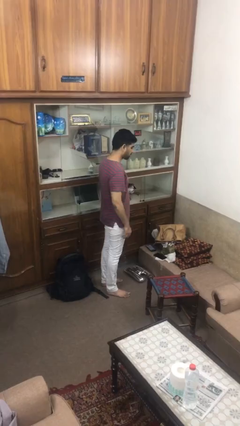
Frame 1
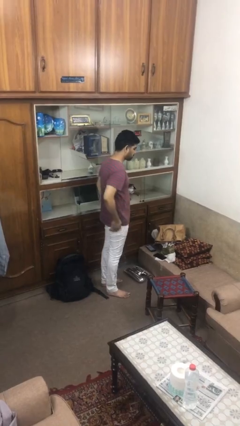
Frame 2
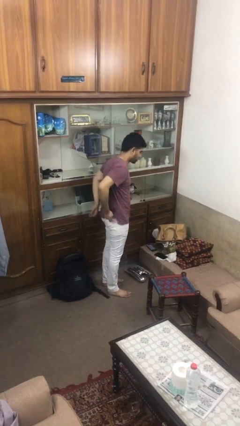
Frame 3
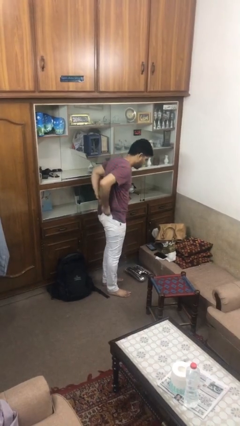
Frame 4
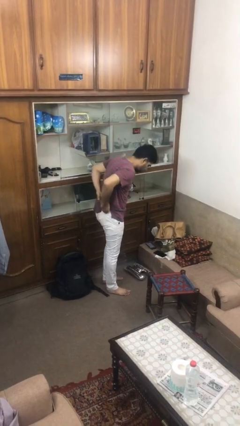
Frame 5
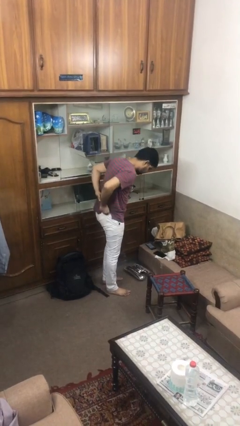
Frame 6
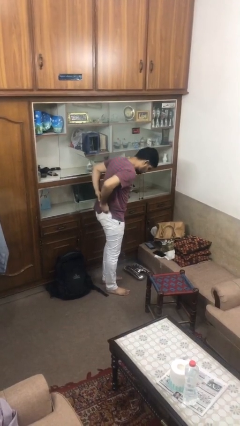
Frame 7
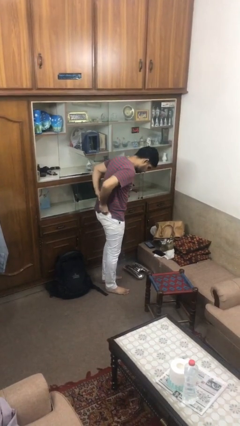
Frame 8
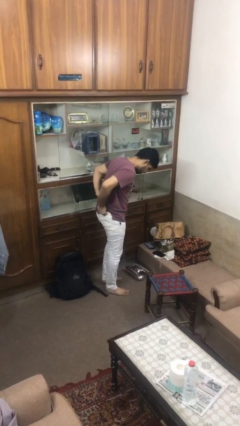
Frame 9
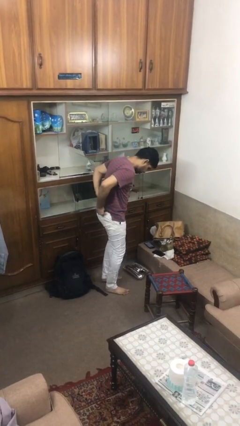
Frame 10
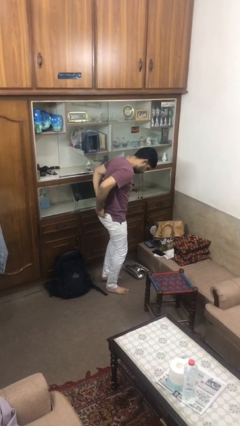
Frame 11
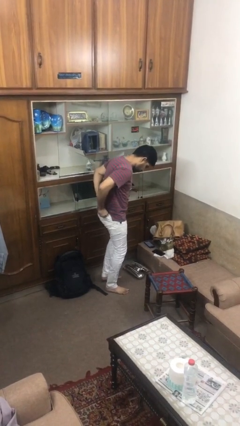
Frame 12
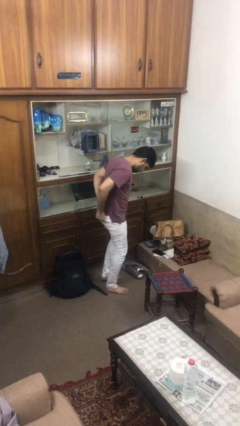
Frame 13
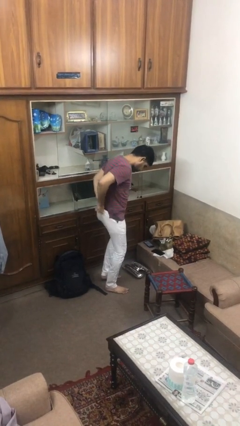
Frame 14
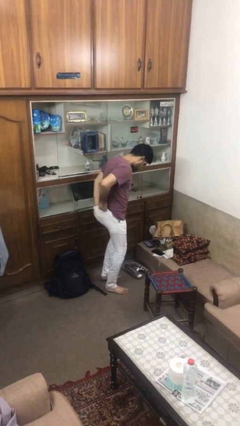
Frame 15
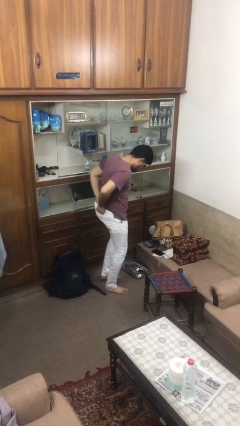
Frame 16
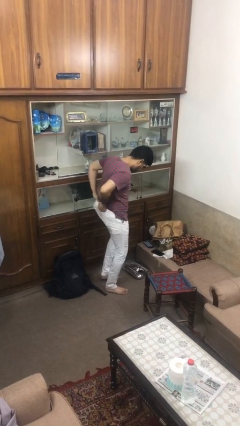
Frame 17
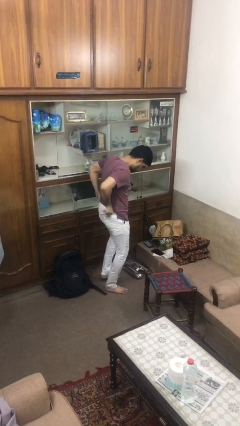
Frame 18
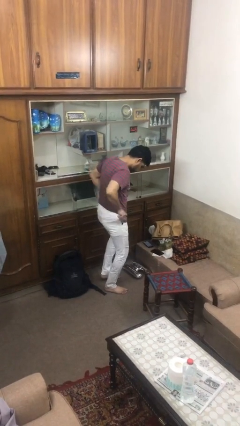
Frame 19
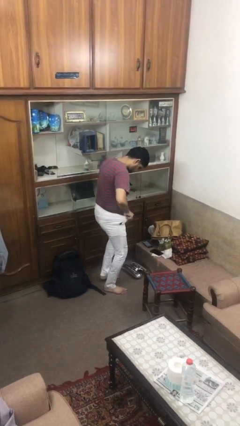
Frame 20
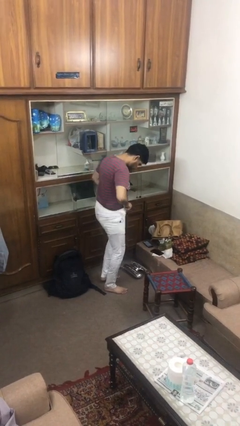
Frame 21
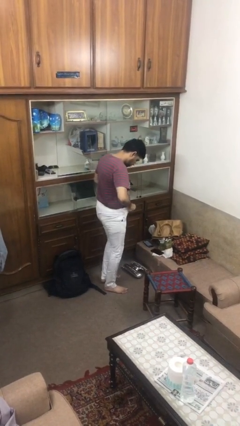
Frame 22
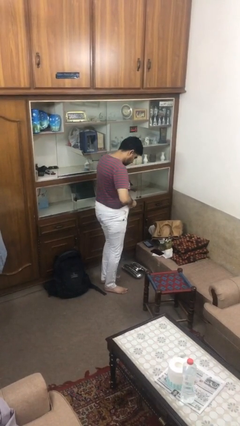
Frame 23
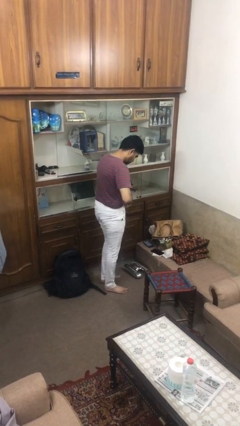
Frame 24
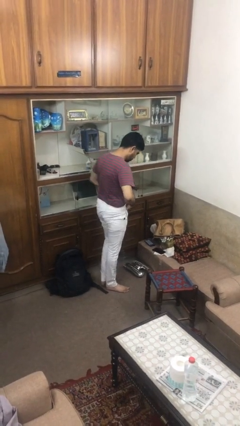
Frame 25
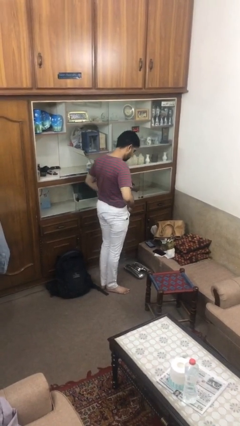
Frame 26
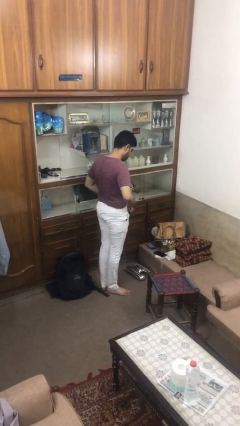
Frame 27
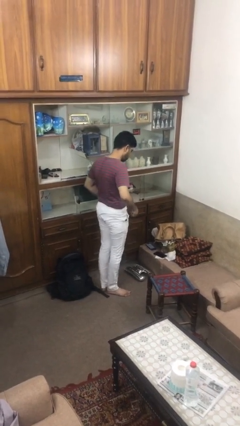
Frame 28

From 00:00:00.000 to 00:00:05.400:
person tucks in shirt

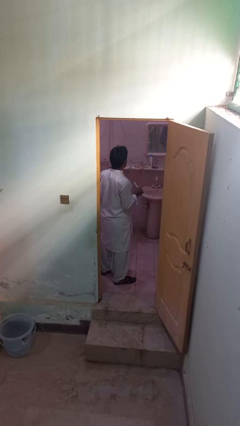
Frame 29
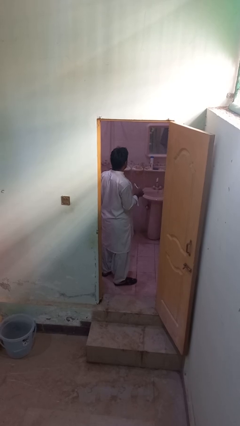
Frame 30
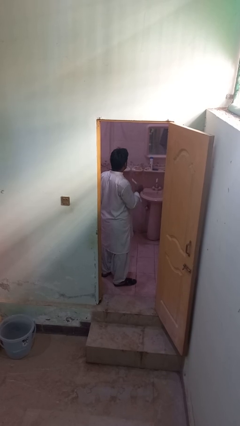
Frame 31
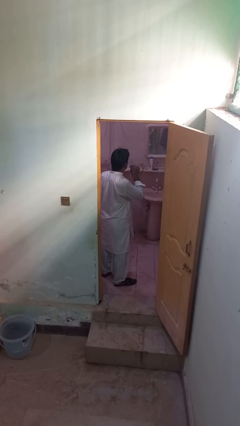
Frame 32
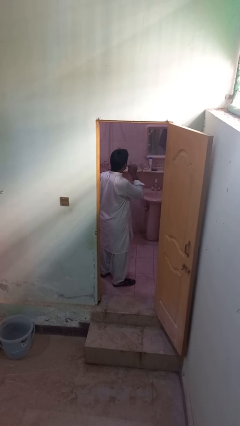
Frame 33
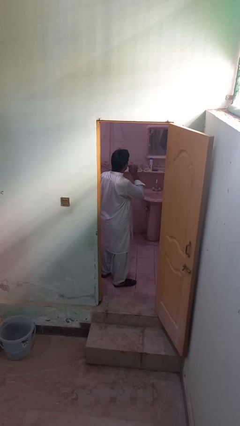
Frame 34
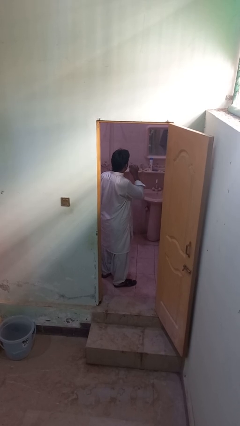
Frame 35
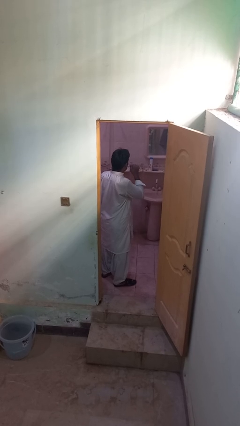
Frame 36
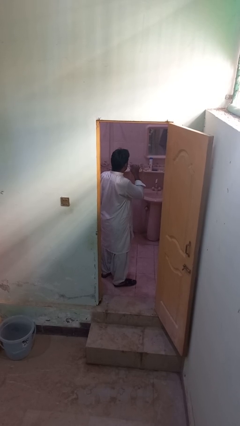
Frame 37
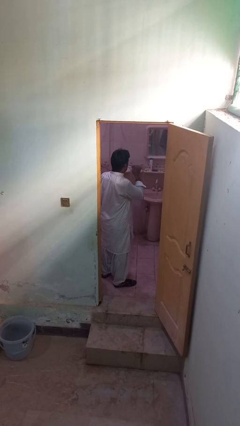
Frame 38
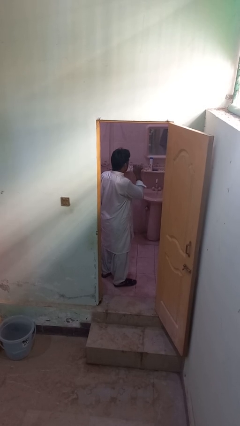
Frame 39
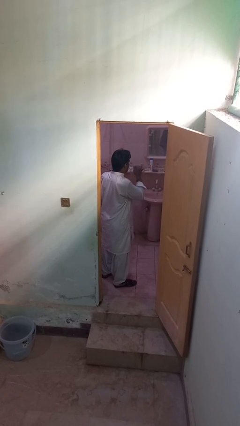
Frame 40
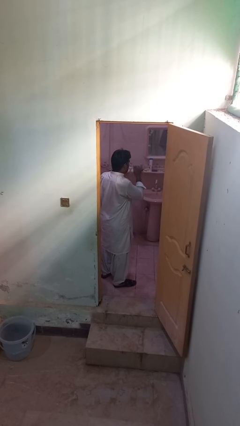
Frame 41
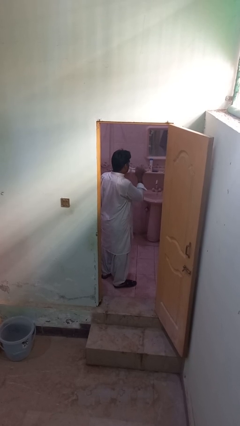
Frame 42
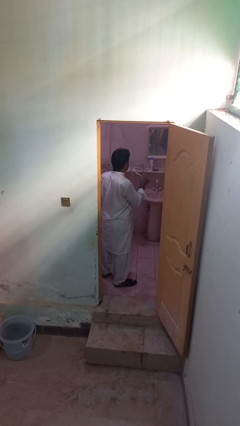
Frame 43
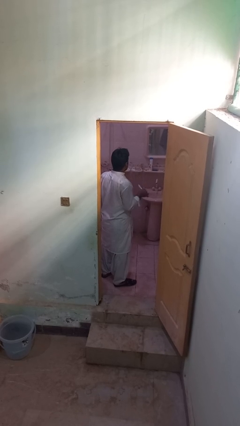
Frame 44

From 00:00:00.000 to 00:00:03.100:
person brushes teeth

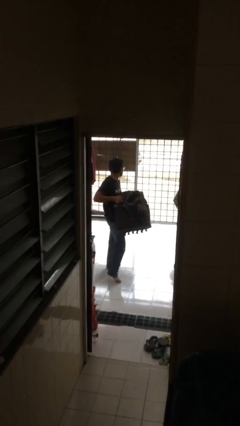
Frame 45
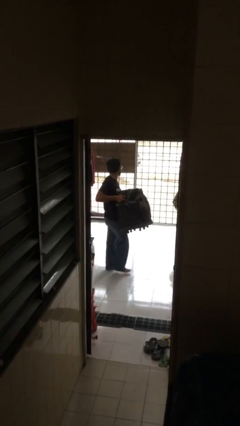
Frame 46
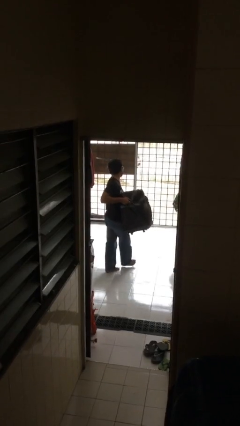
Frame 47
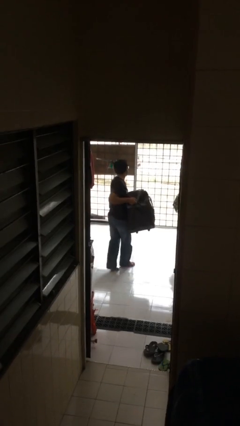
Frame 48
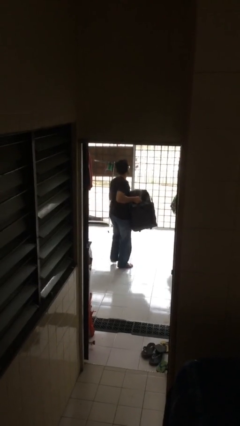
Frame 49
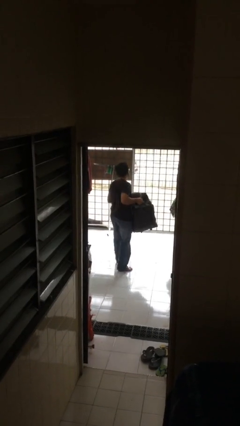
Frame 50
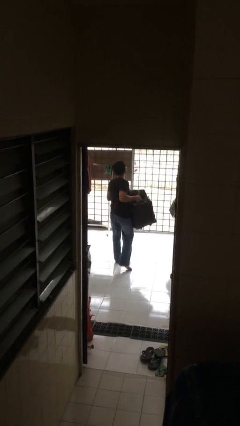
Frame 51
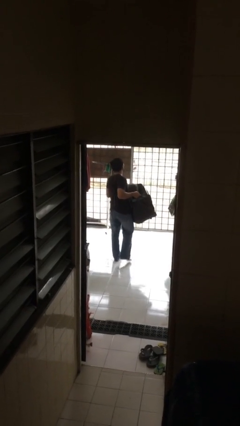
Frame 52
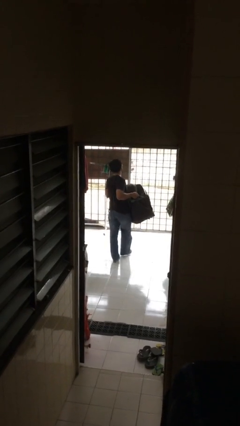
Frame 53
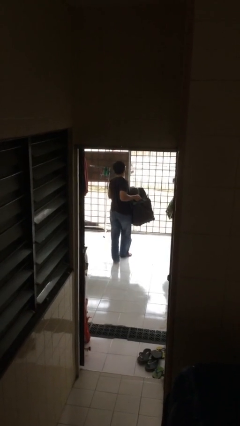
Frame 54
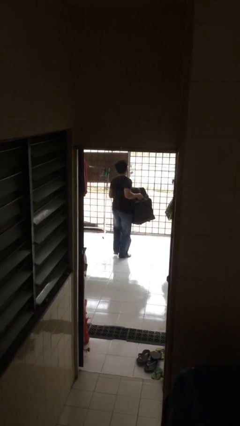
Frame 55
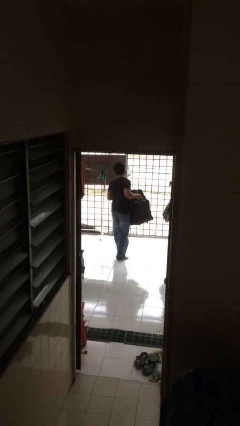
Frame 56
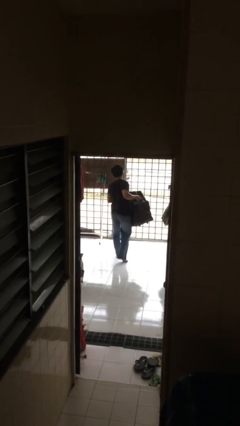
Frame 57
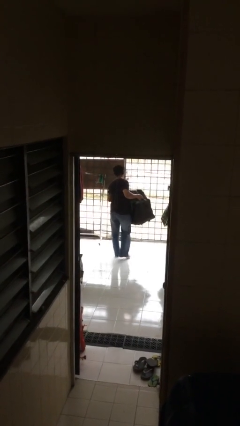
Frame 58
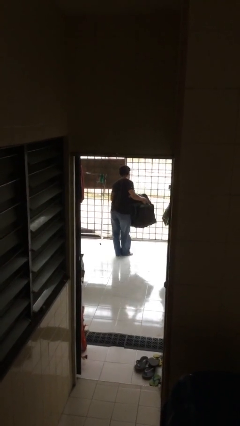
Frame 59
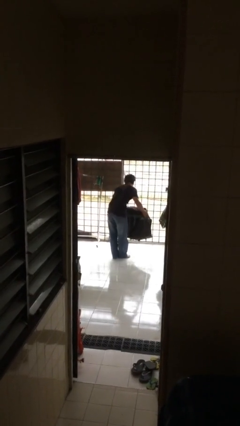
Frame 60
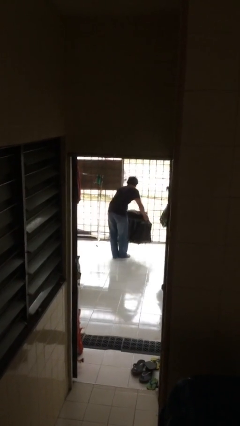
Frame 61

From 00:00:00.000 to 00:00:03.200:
person carries heavy object

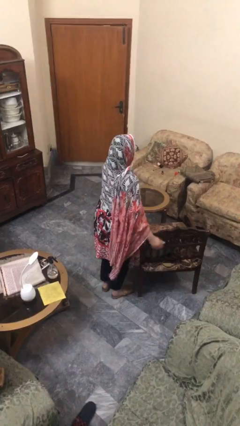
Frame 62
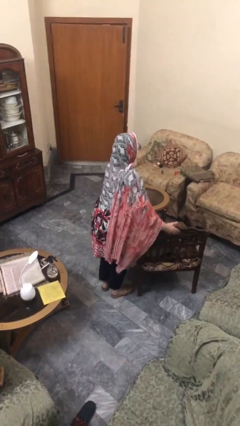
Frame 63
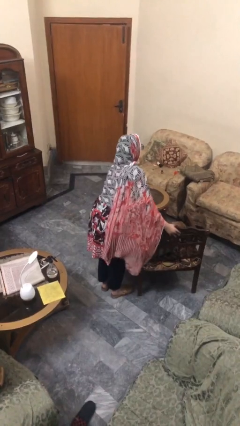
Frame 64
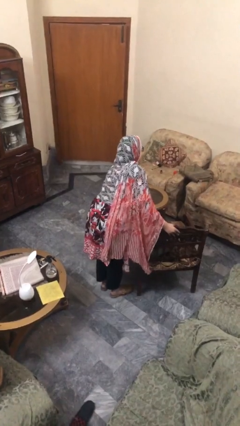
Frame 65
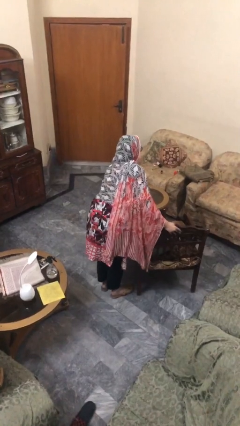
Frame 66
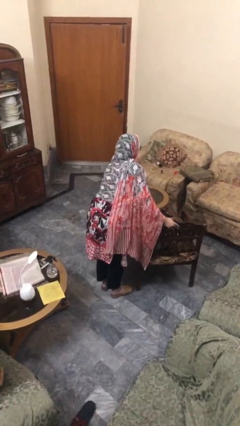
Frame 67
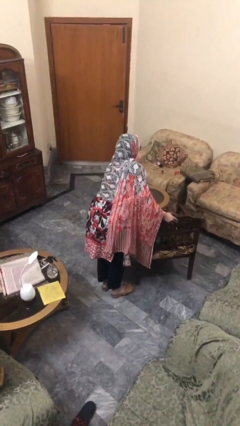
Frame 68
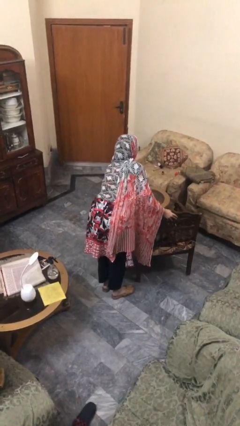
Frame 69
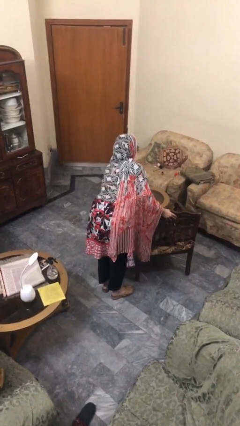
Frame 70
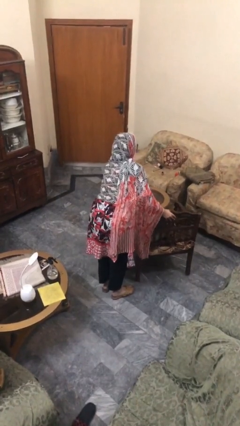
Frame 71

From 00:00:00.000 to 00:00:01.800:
person pushes in chair

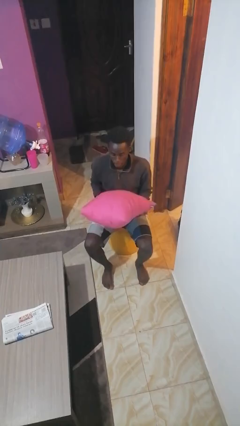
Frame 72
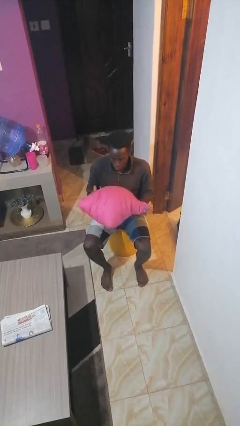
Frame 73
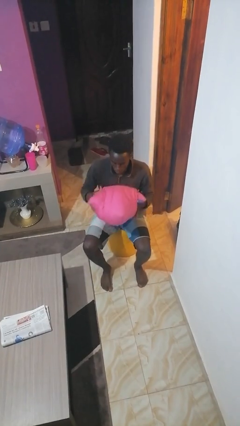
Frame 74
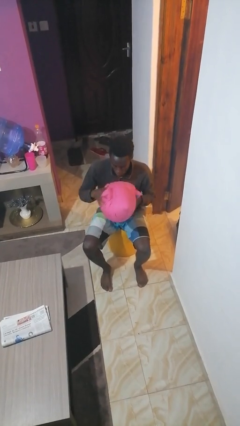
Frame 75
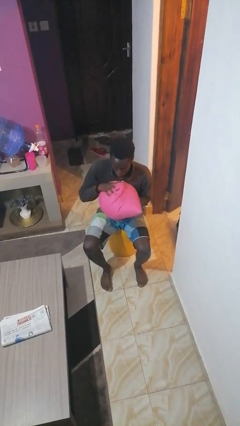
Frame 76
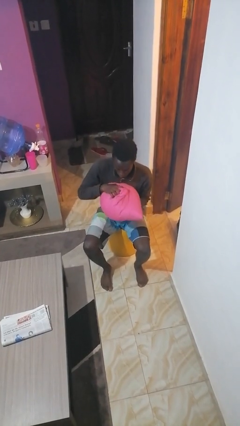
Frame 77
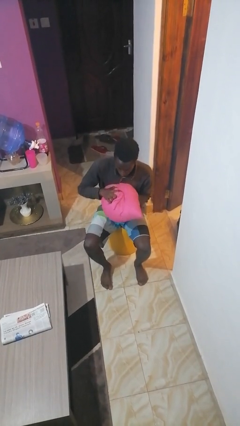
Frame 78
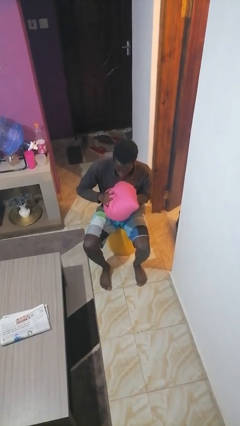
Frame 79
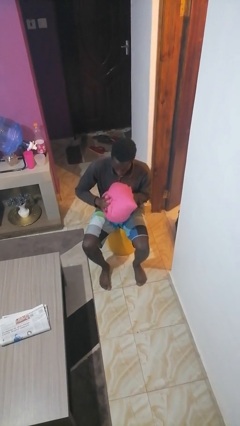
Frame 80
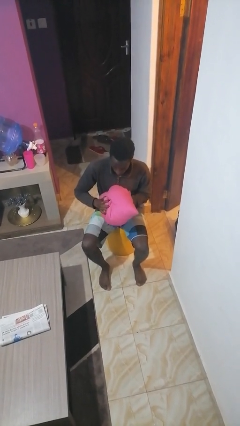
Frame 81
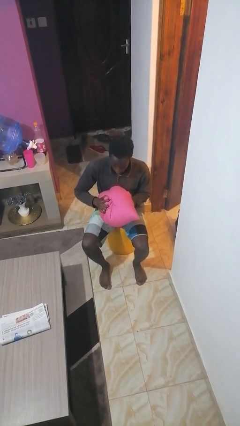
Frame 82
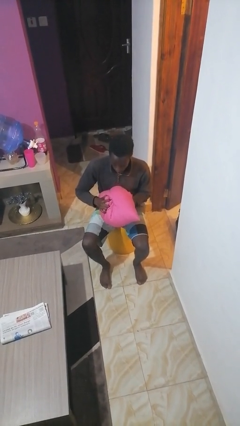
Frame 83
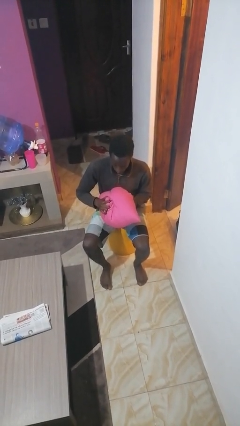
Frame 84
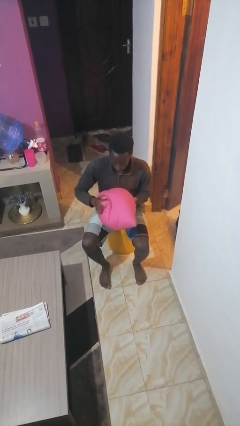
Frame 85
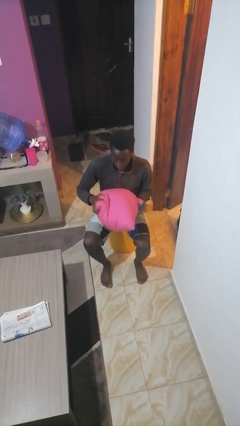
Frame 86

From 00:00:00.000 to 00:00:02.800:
person squeezes object

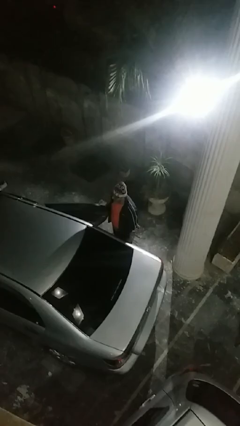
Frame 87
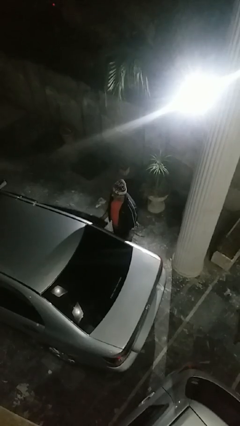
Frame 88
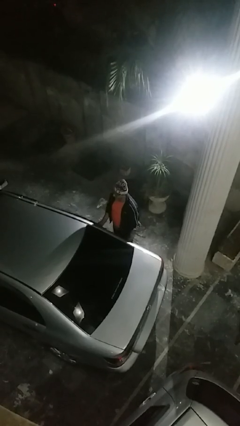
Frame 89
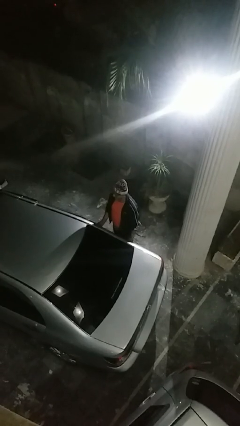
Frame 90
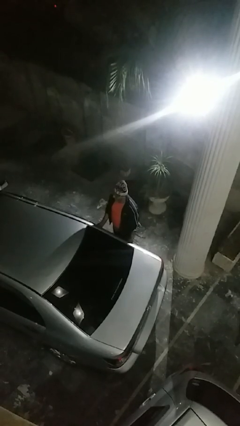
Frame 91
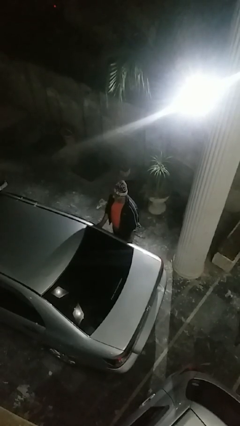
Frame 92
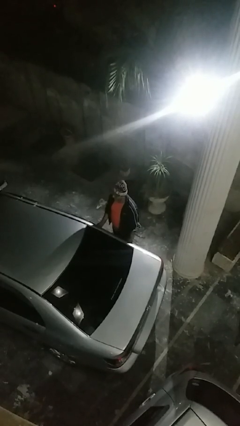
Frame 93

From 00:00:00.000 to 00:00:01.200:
person closes car door
